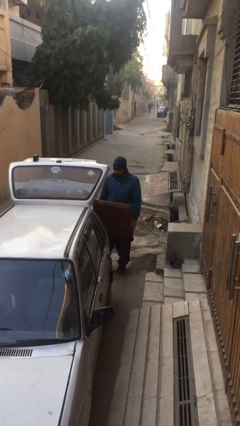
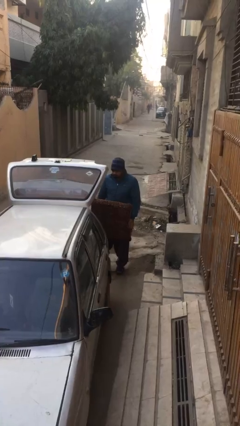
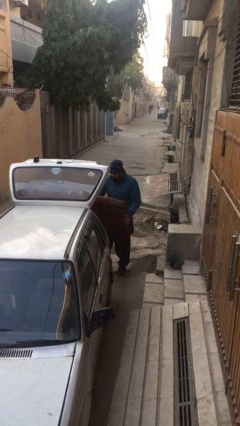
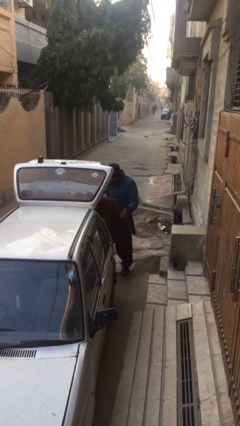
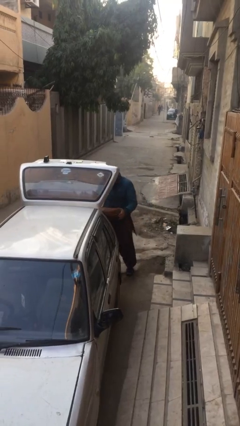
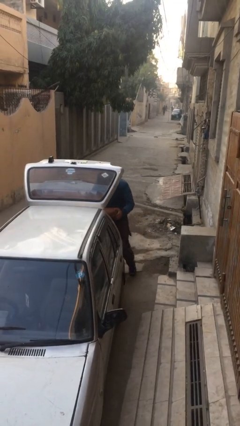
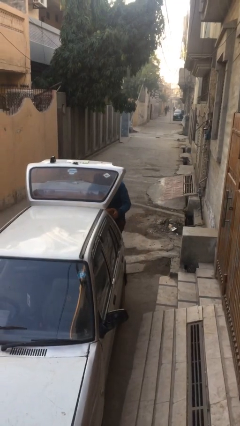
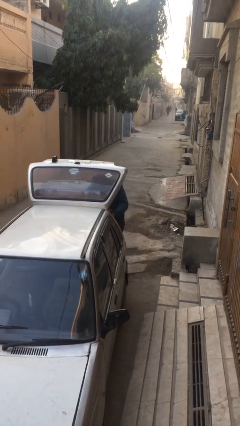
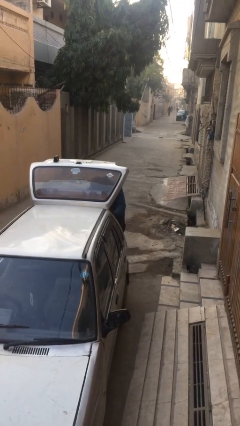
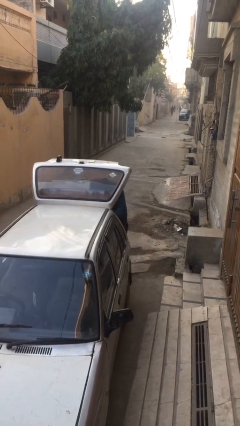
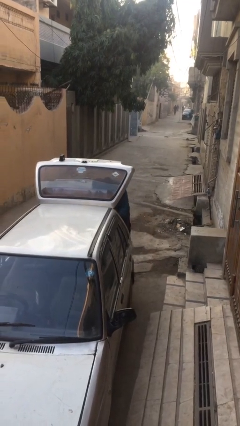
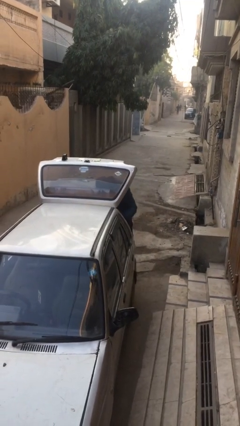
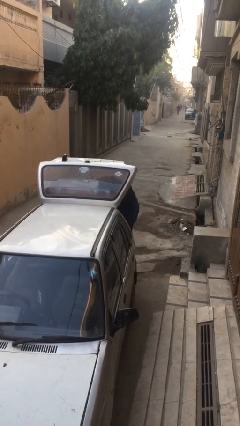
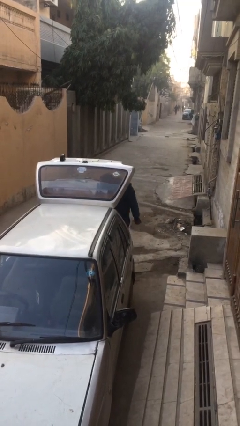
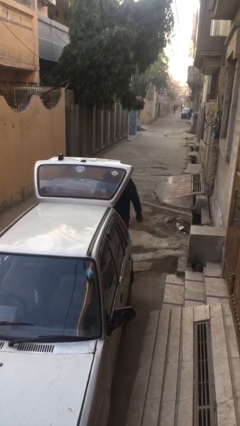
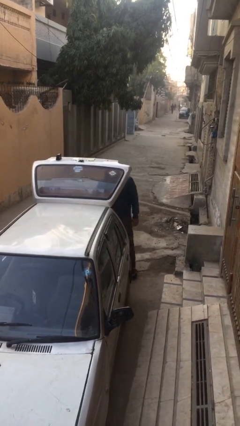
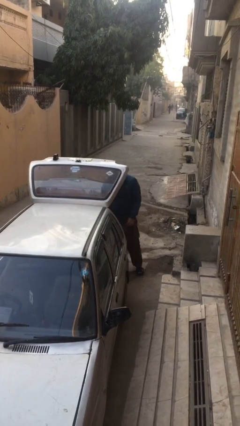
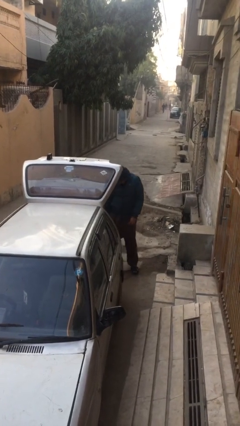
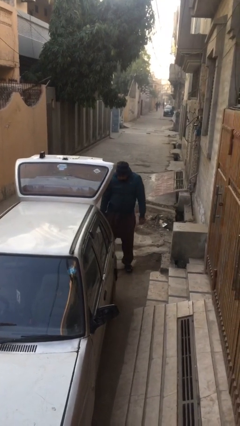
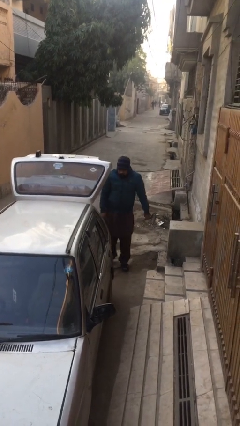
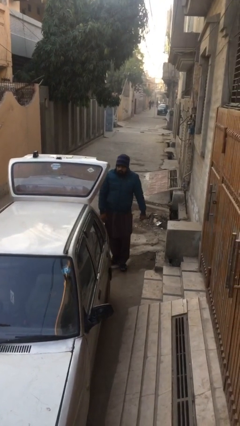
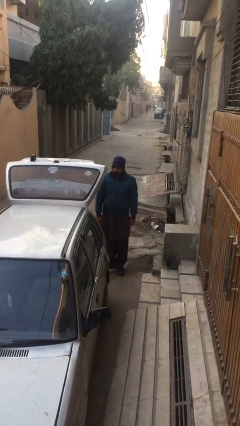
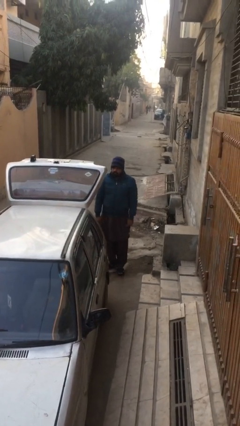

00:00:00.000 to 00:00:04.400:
person loads car

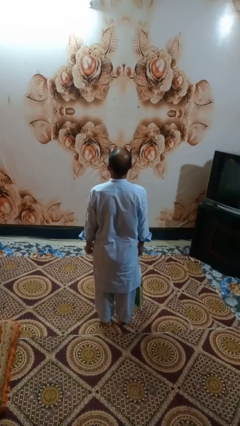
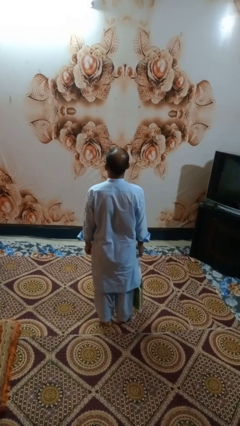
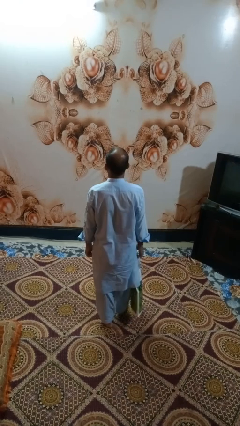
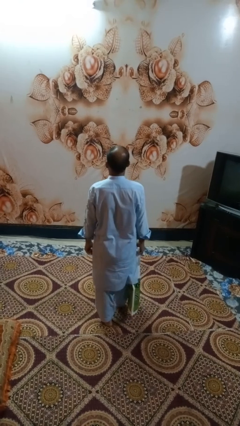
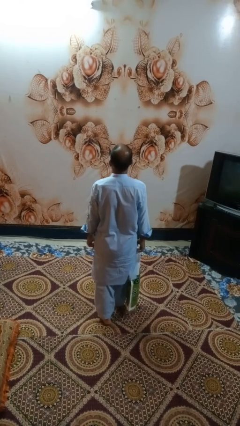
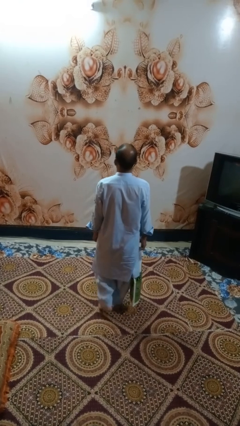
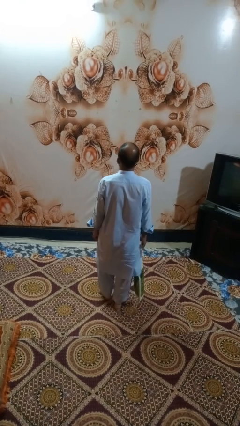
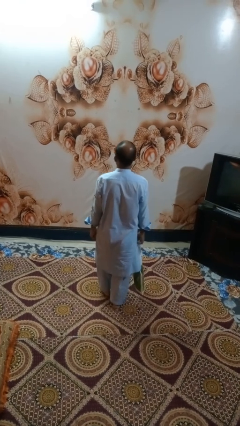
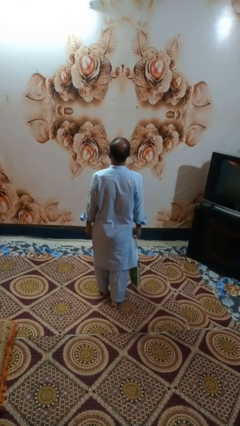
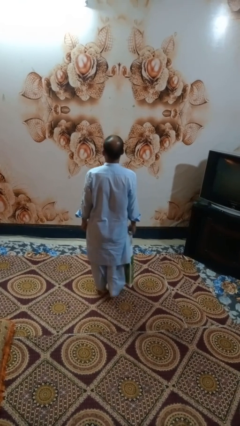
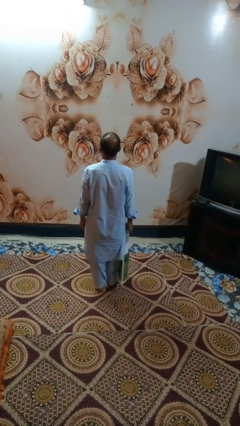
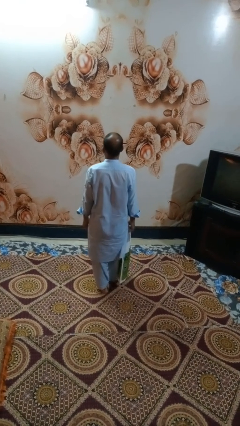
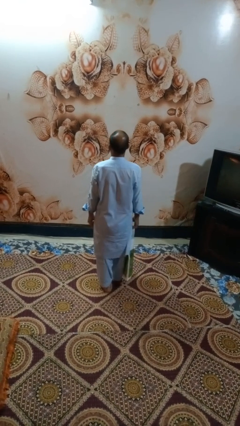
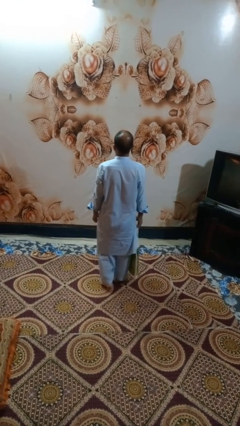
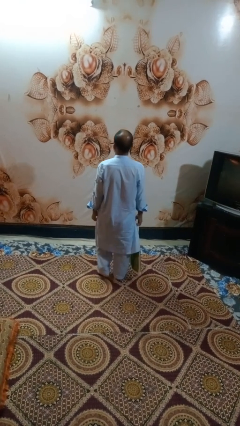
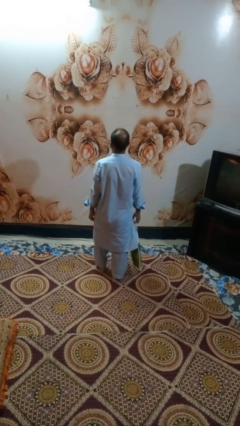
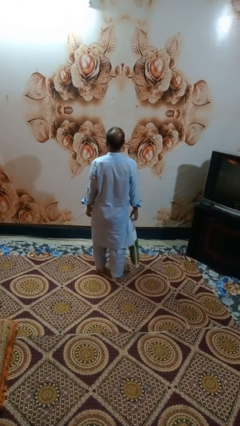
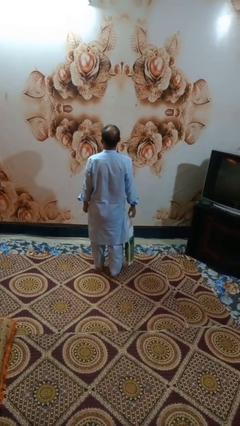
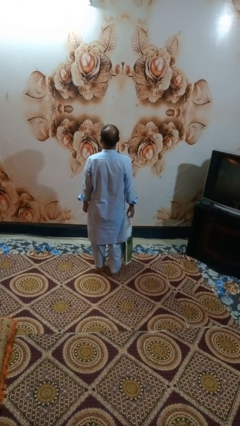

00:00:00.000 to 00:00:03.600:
person carries groceries

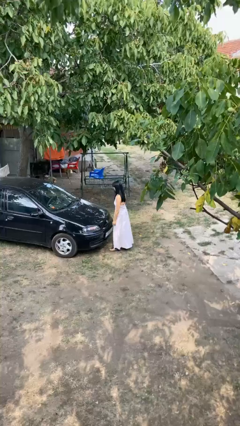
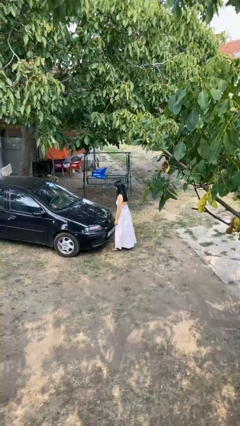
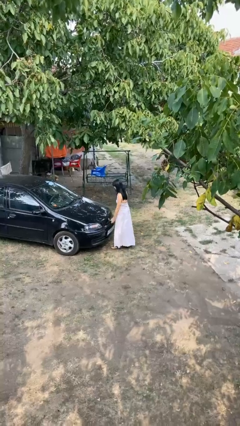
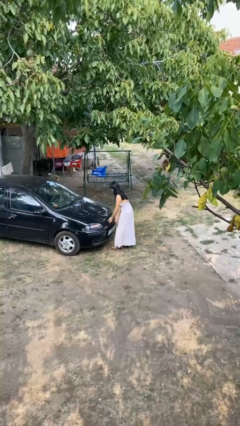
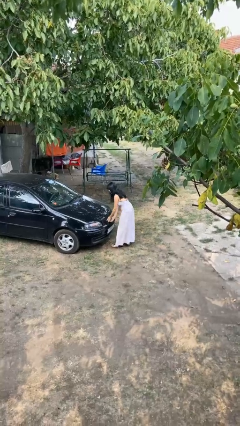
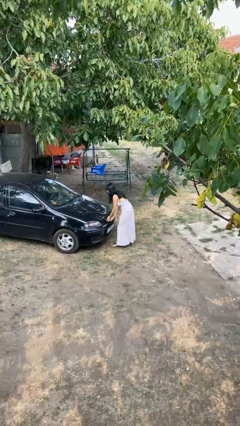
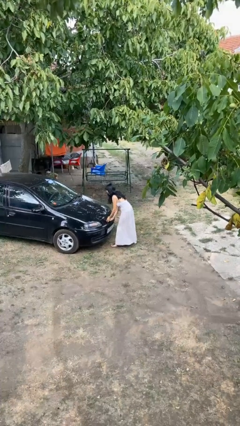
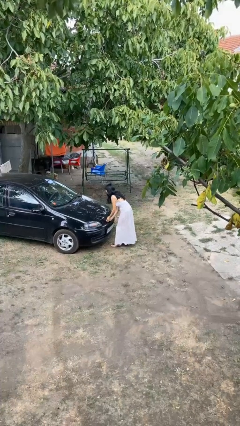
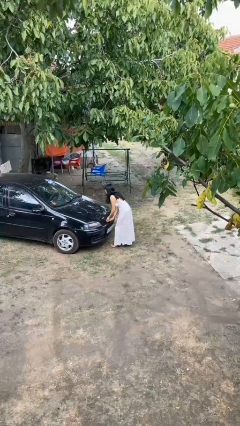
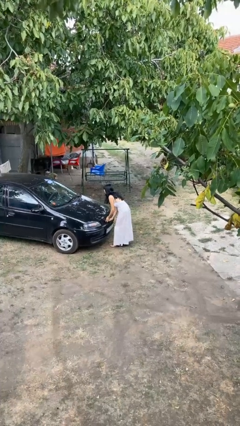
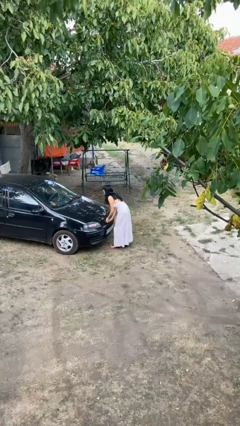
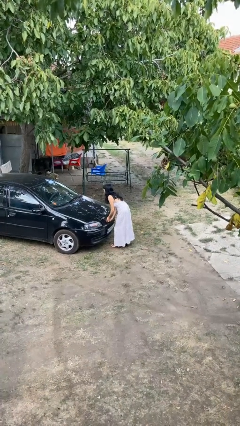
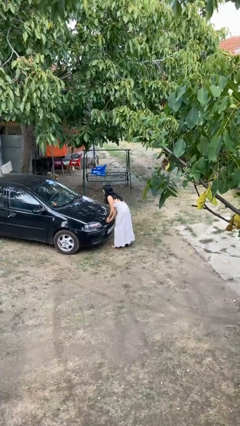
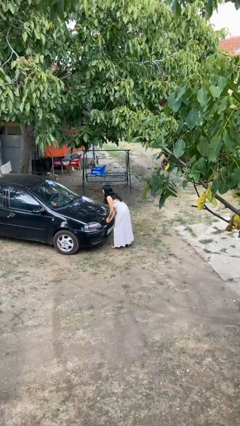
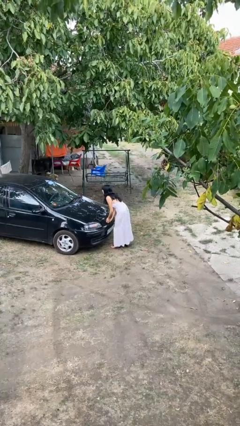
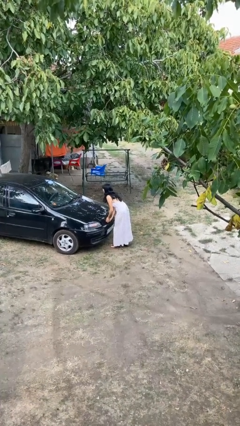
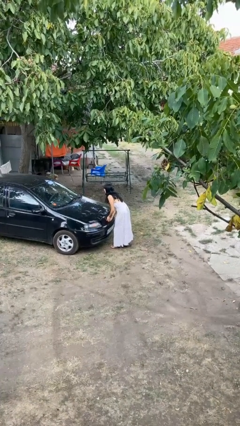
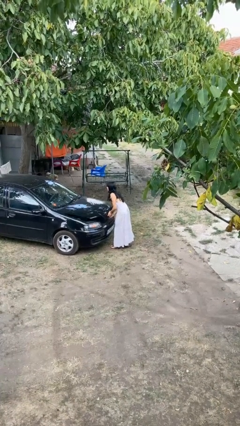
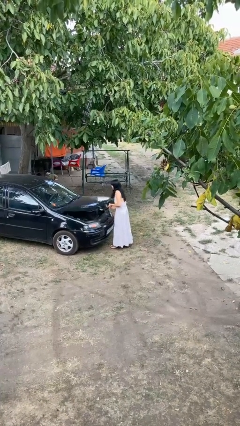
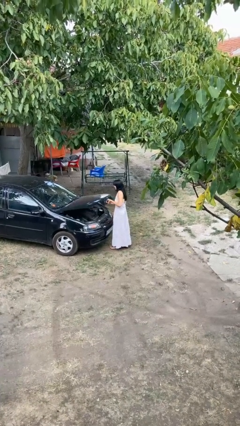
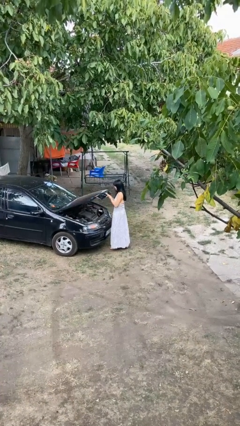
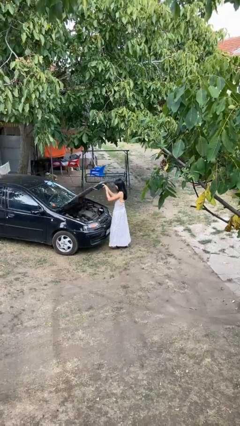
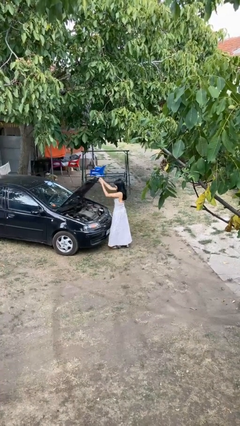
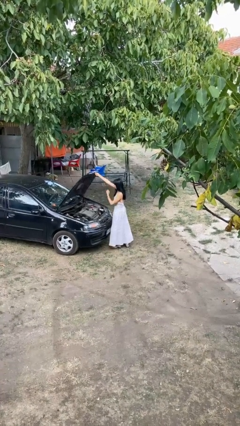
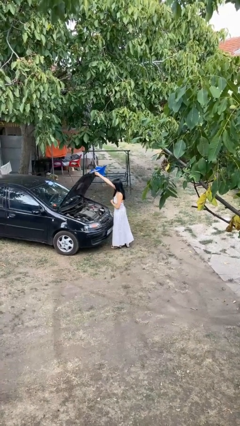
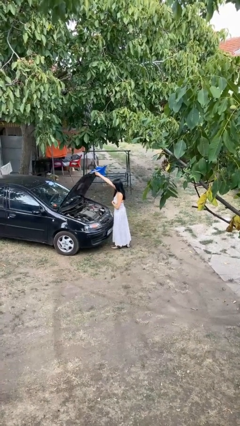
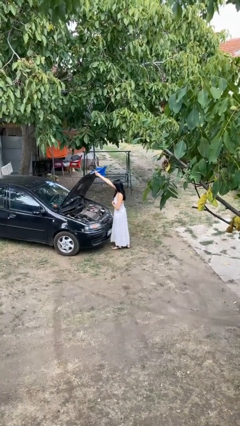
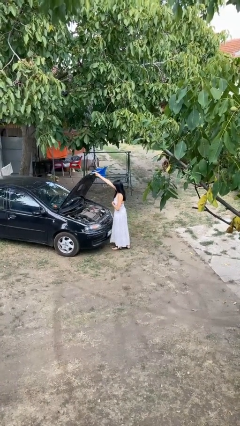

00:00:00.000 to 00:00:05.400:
person opens car hood

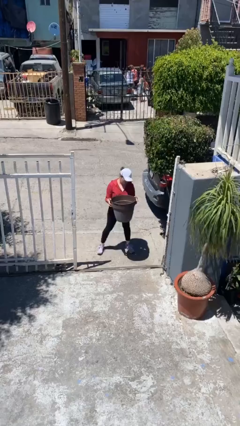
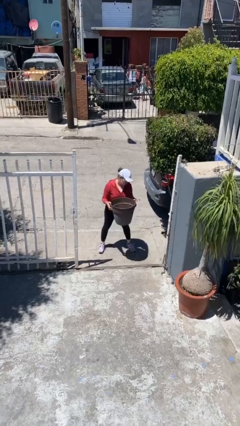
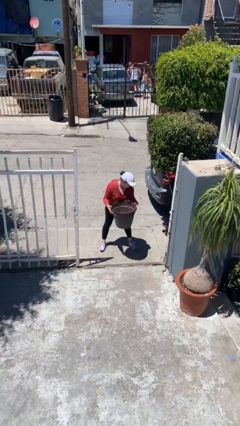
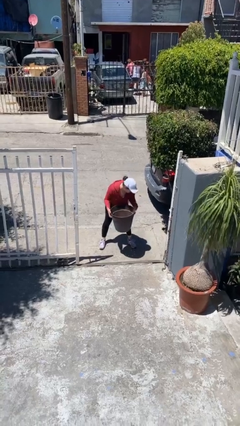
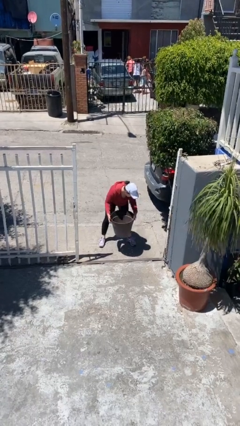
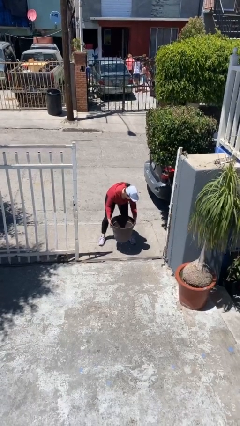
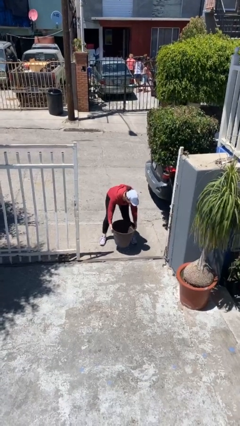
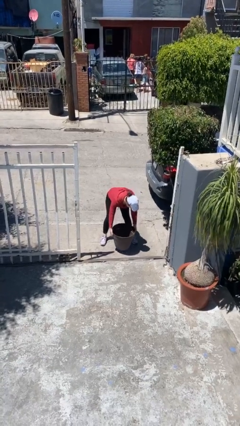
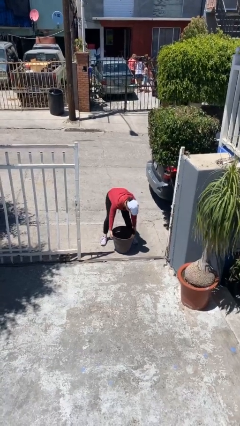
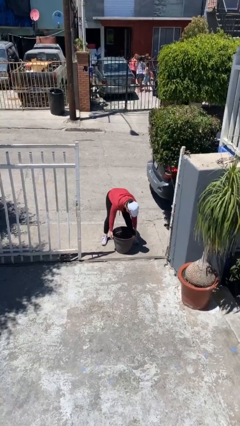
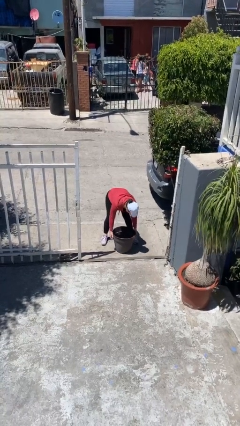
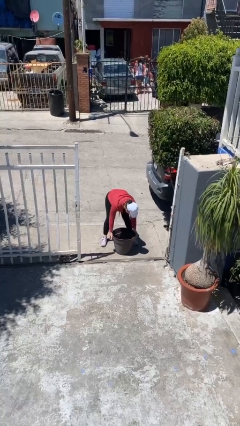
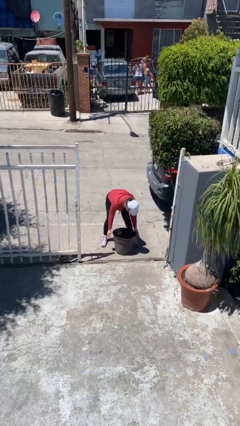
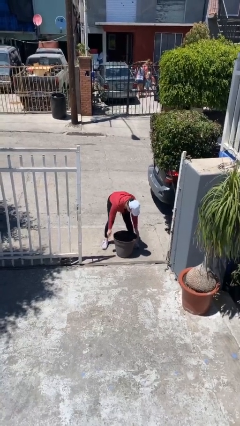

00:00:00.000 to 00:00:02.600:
person puts down object on floor

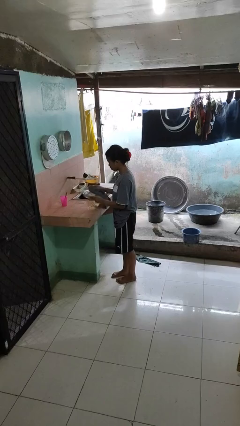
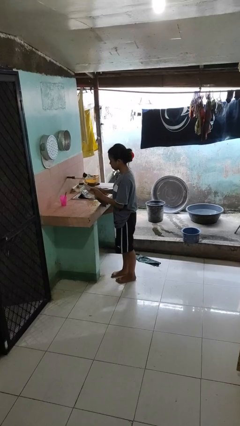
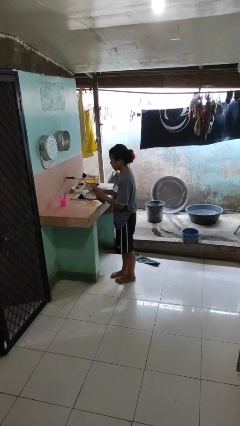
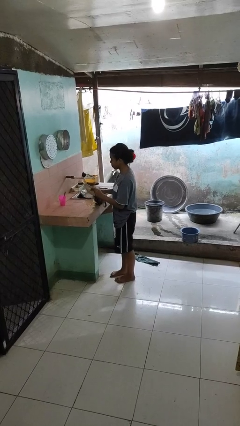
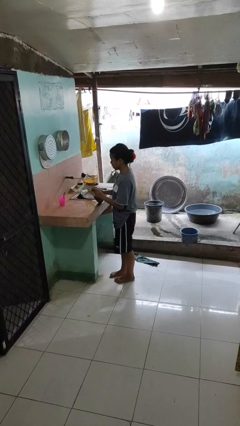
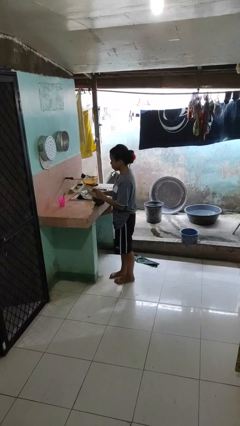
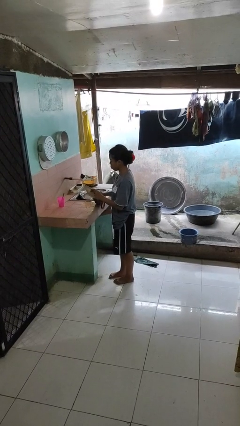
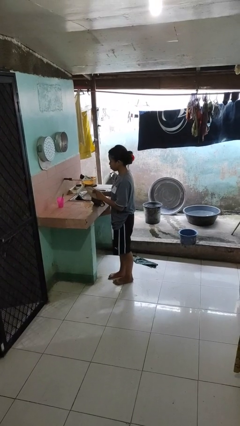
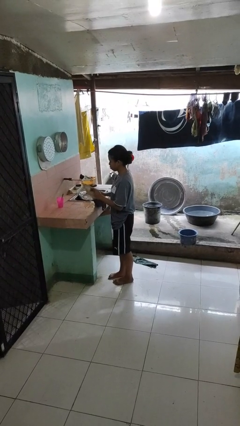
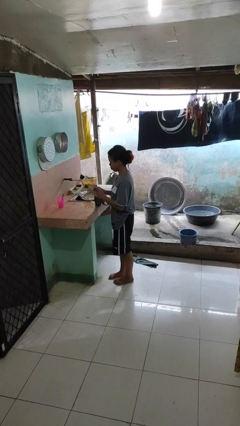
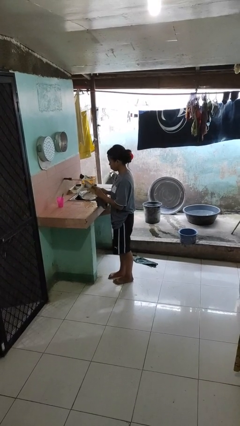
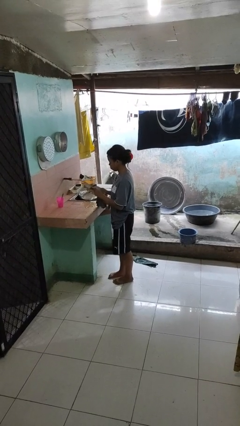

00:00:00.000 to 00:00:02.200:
person dries dish
